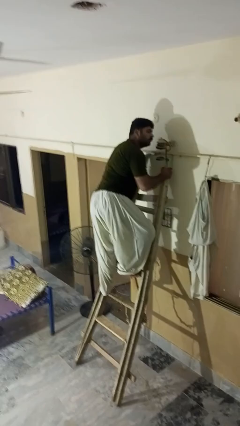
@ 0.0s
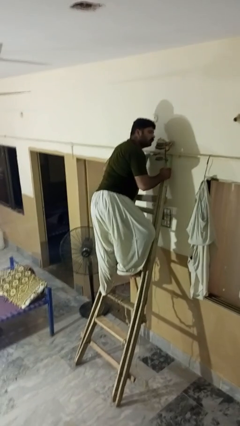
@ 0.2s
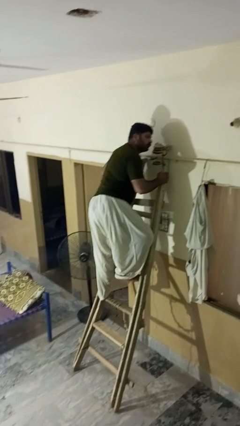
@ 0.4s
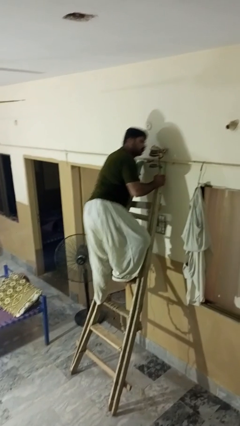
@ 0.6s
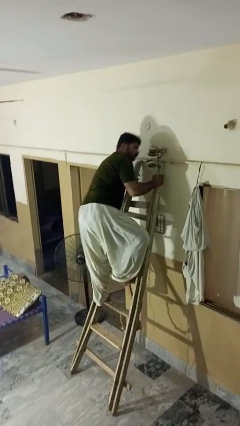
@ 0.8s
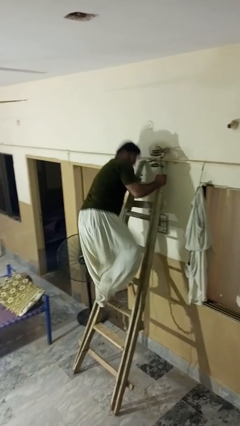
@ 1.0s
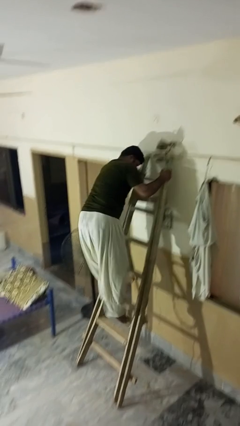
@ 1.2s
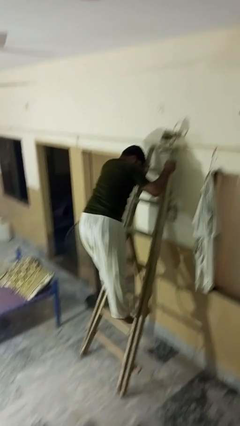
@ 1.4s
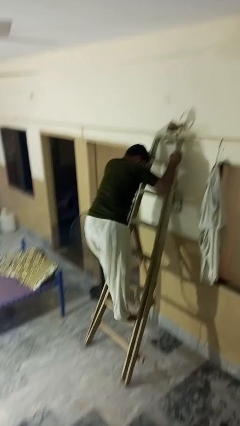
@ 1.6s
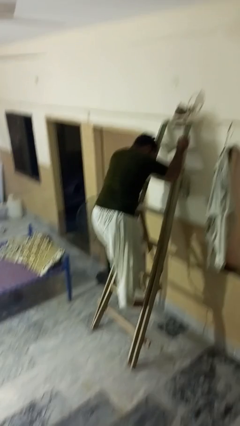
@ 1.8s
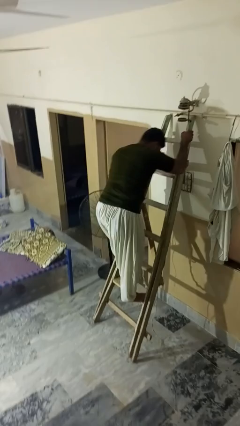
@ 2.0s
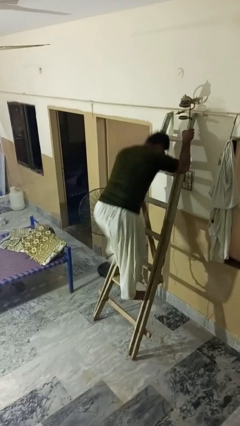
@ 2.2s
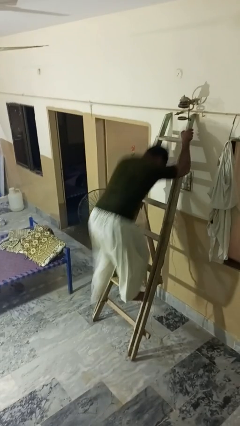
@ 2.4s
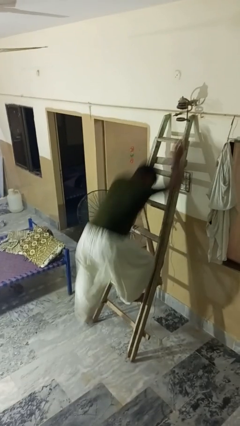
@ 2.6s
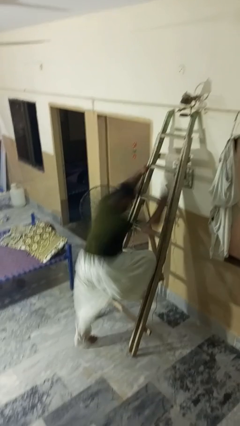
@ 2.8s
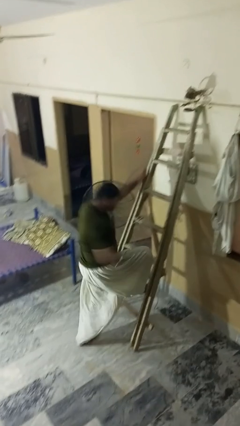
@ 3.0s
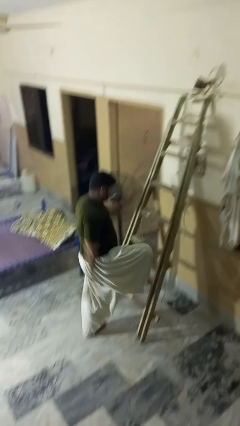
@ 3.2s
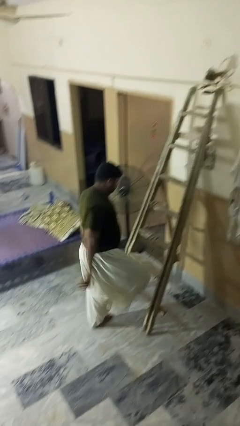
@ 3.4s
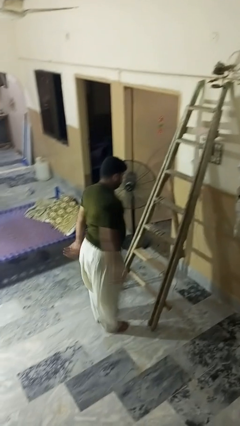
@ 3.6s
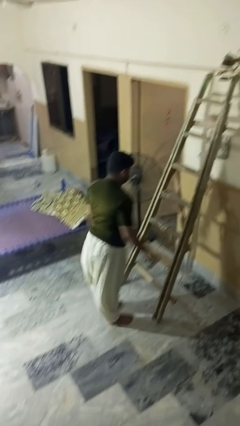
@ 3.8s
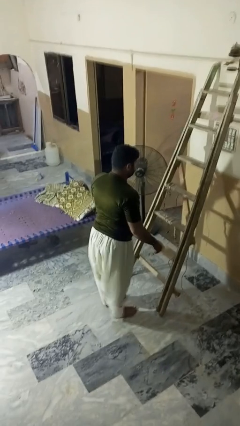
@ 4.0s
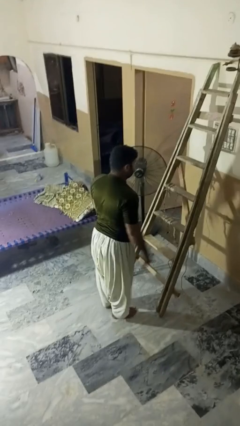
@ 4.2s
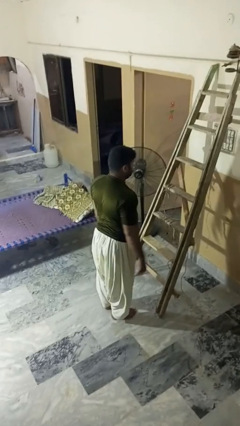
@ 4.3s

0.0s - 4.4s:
person climbs down ladder

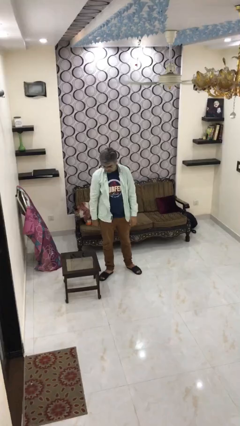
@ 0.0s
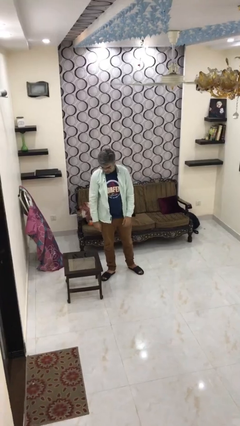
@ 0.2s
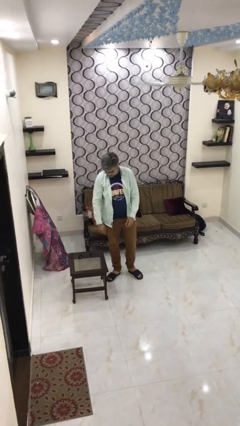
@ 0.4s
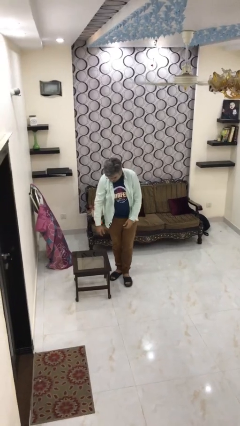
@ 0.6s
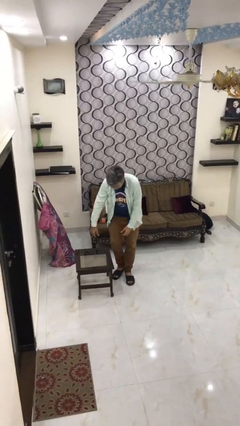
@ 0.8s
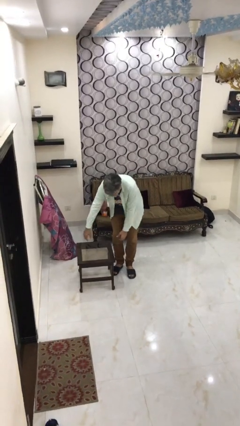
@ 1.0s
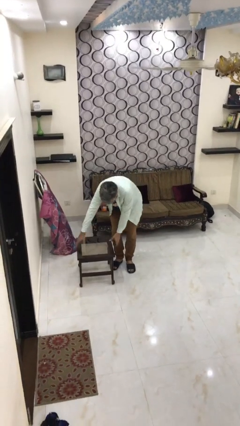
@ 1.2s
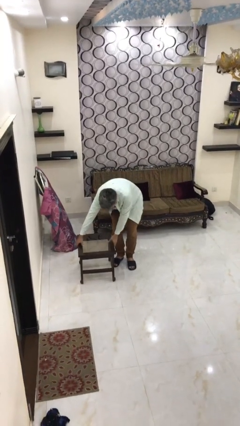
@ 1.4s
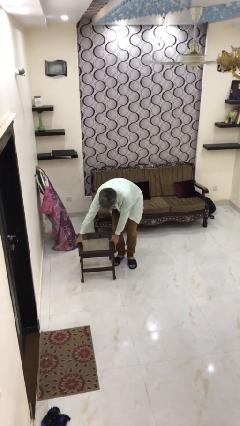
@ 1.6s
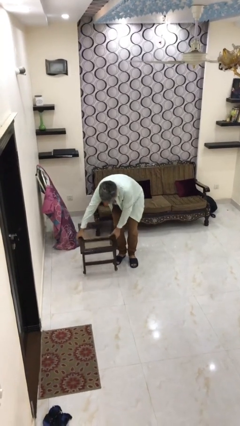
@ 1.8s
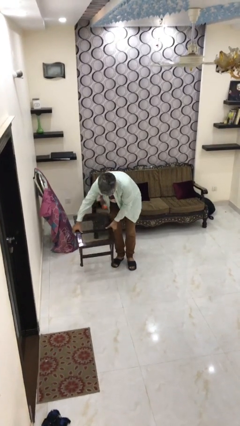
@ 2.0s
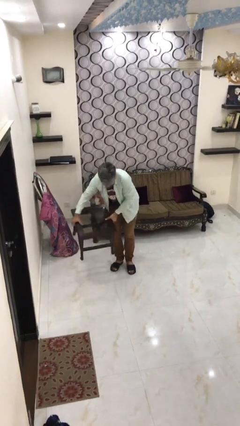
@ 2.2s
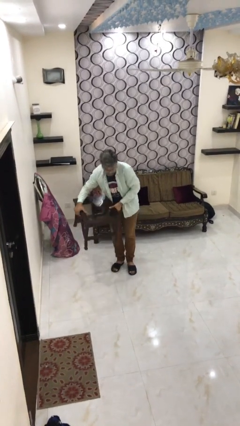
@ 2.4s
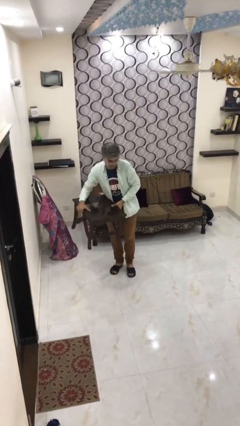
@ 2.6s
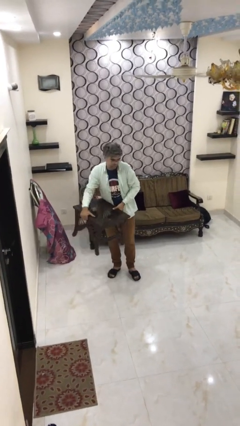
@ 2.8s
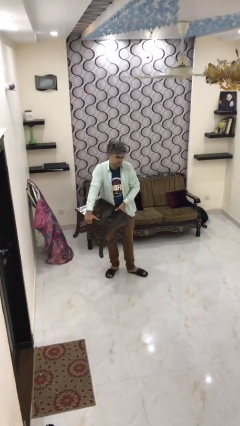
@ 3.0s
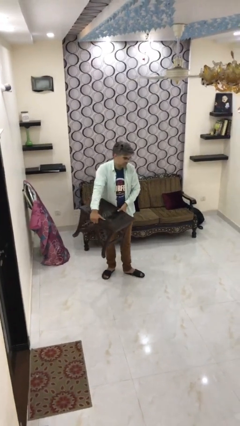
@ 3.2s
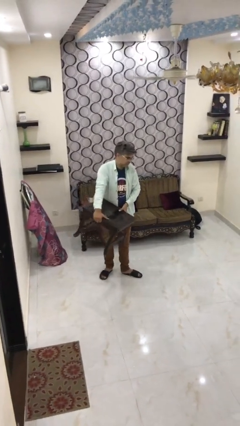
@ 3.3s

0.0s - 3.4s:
person picks up object from floor

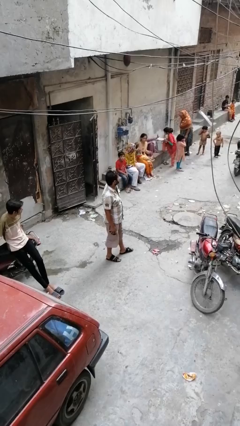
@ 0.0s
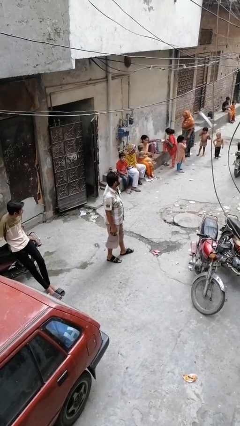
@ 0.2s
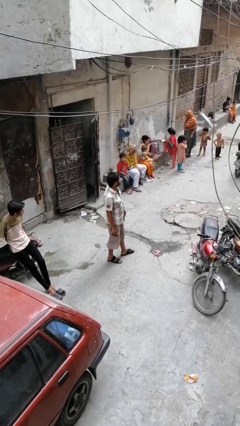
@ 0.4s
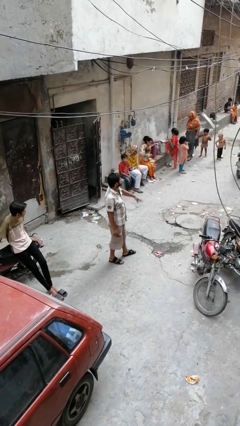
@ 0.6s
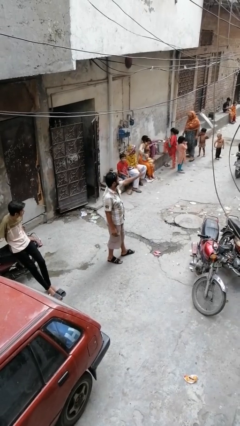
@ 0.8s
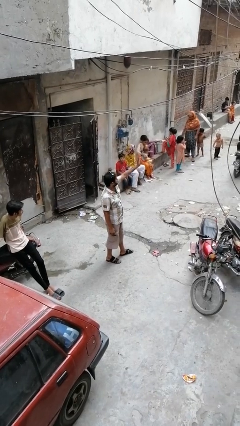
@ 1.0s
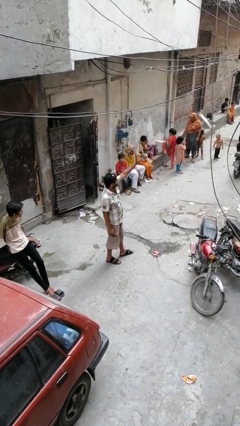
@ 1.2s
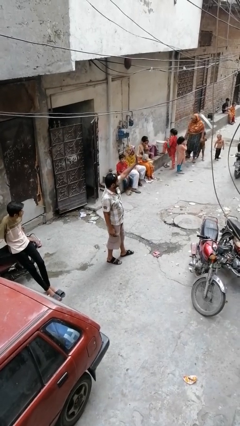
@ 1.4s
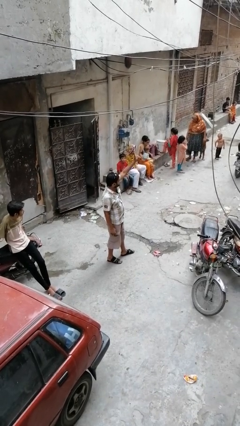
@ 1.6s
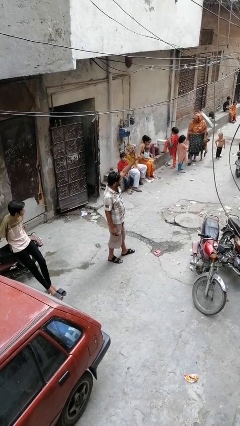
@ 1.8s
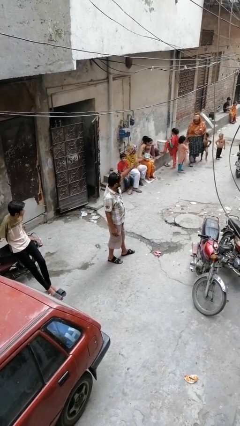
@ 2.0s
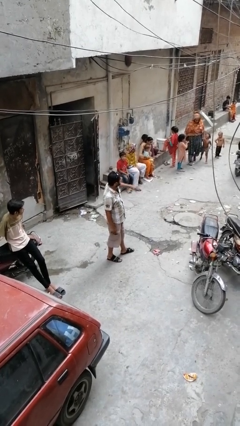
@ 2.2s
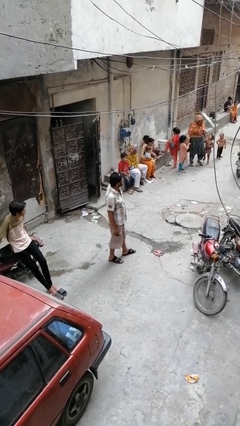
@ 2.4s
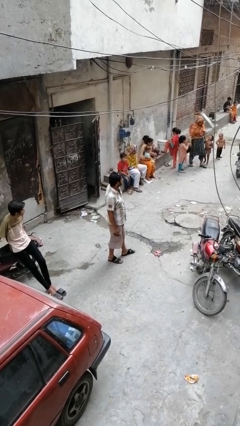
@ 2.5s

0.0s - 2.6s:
person waves at person

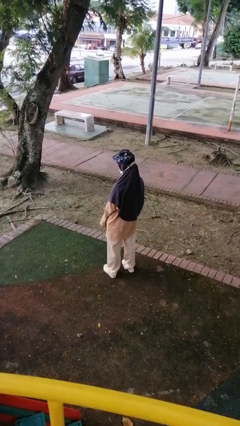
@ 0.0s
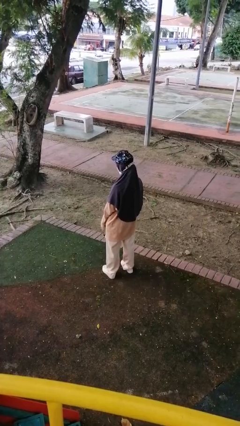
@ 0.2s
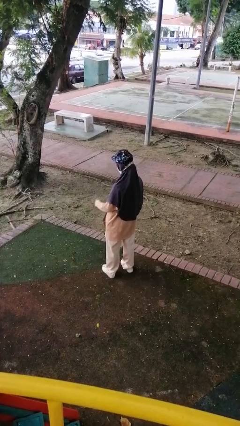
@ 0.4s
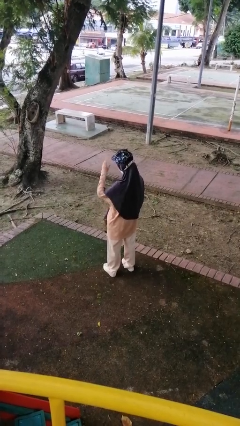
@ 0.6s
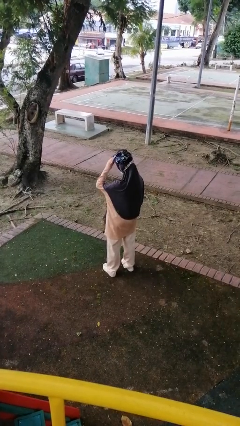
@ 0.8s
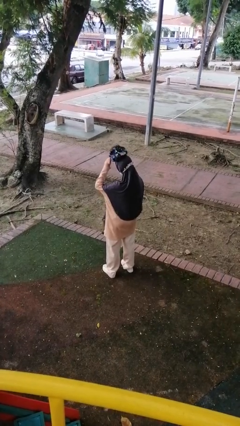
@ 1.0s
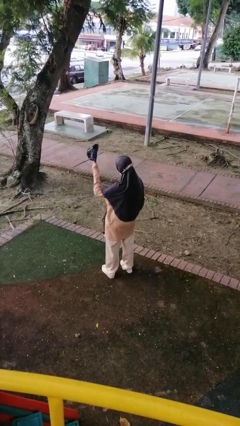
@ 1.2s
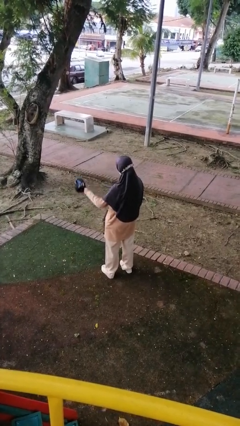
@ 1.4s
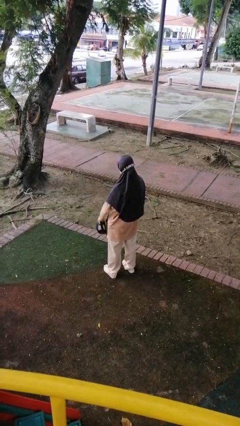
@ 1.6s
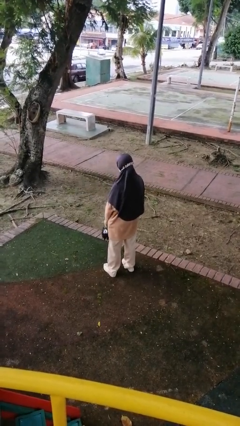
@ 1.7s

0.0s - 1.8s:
person takes off hat

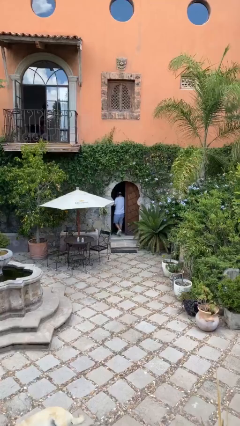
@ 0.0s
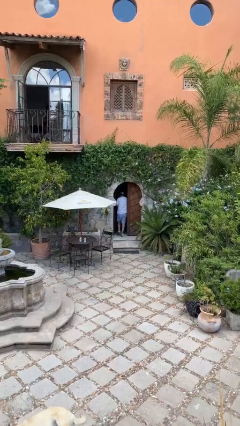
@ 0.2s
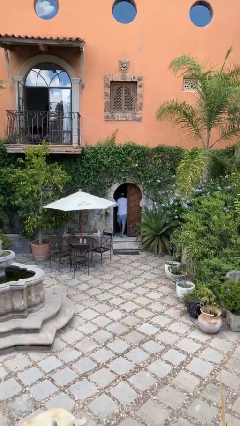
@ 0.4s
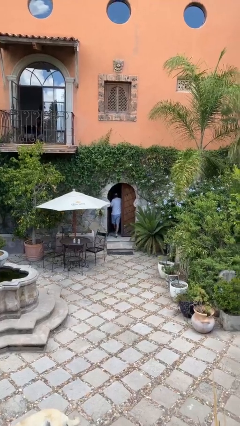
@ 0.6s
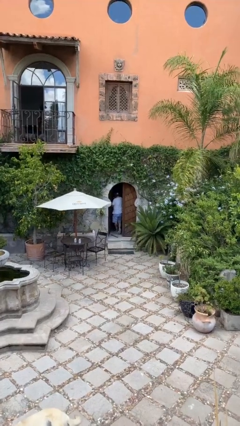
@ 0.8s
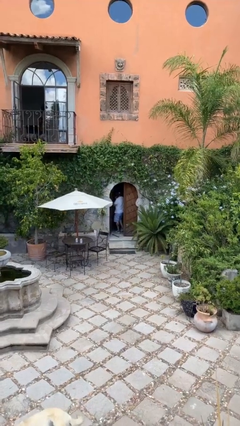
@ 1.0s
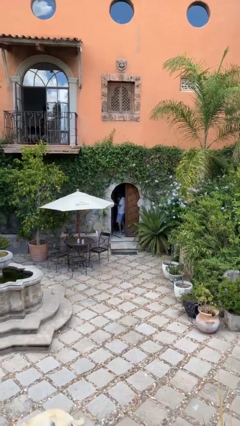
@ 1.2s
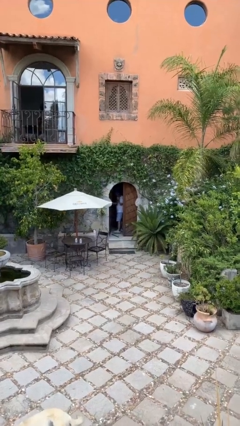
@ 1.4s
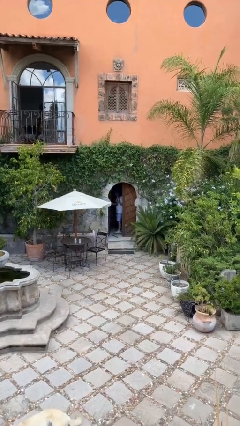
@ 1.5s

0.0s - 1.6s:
person exits scene through structure

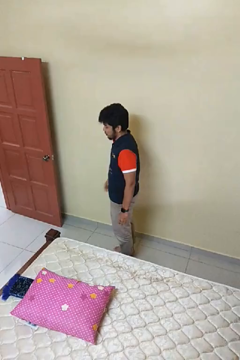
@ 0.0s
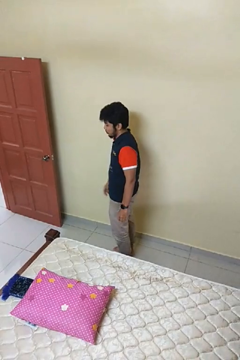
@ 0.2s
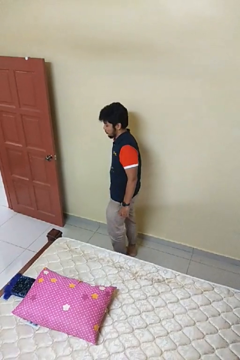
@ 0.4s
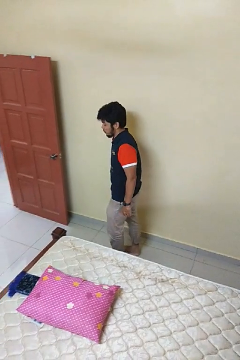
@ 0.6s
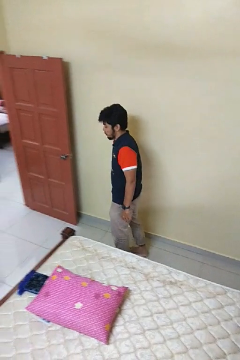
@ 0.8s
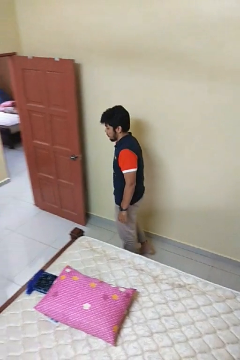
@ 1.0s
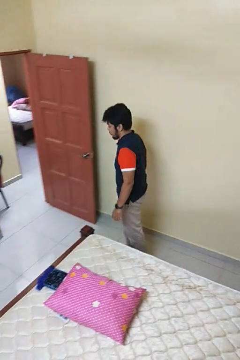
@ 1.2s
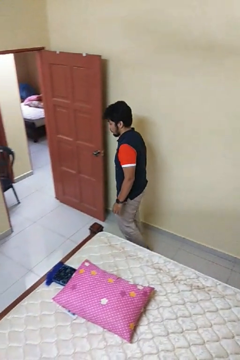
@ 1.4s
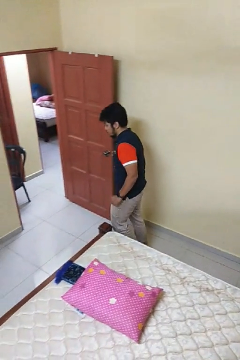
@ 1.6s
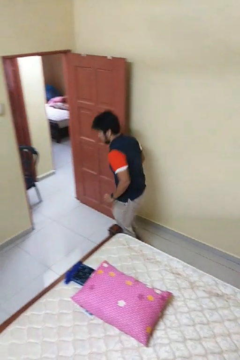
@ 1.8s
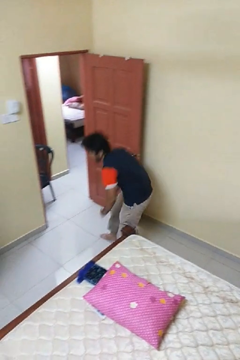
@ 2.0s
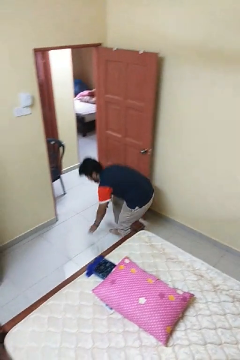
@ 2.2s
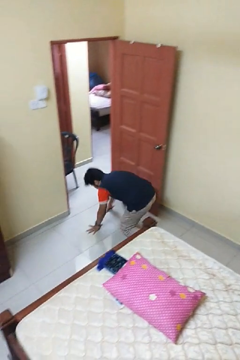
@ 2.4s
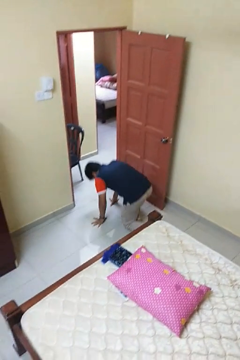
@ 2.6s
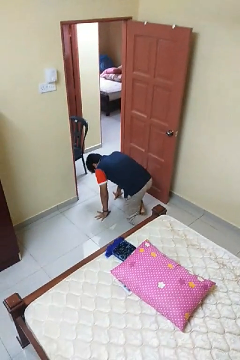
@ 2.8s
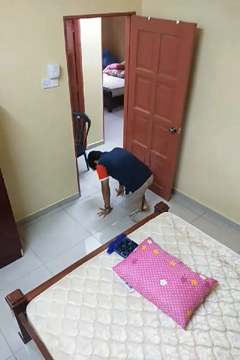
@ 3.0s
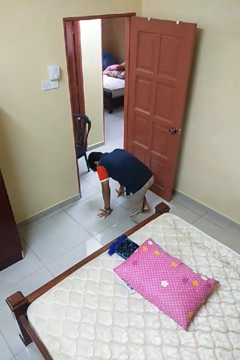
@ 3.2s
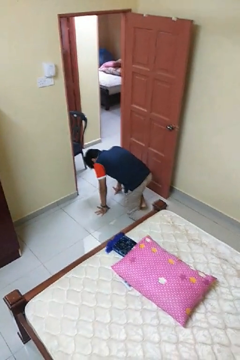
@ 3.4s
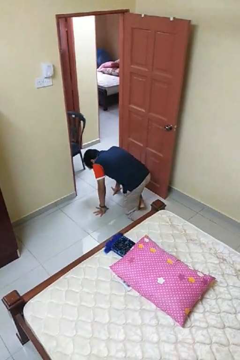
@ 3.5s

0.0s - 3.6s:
person trips on object on floor

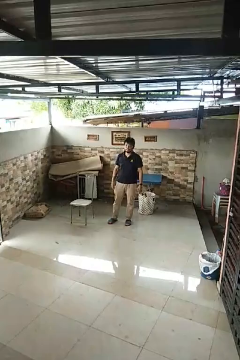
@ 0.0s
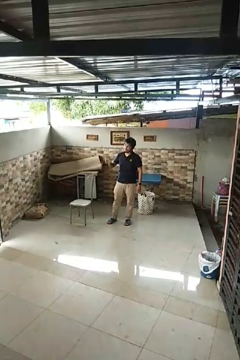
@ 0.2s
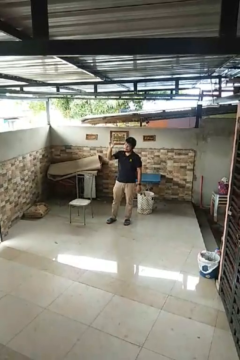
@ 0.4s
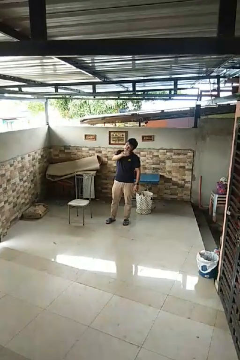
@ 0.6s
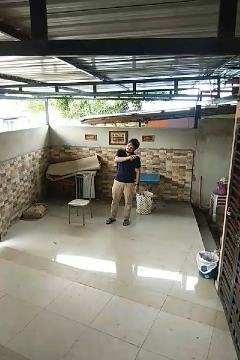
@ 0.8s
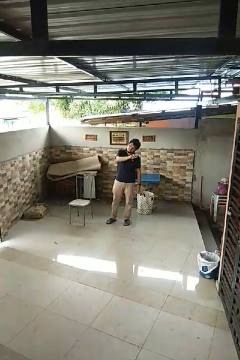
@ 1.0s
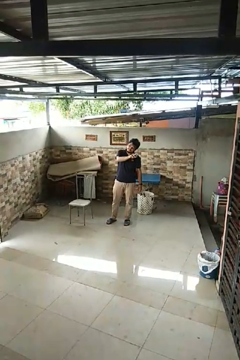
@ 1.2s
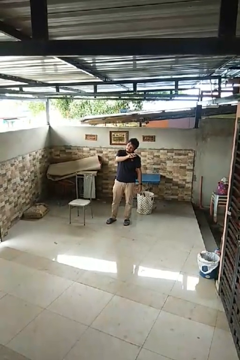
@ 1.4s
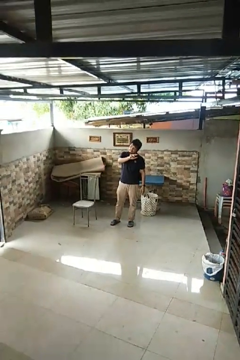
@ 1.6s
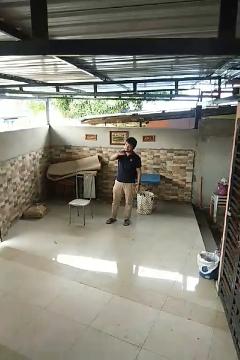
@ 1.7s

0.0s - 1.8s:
person gestures swipe left
